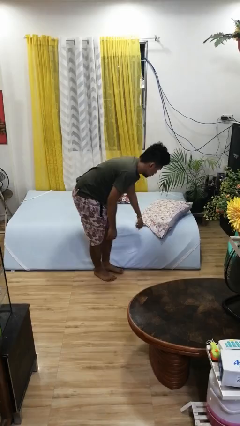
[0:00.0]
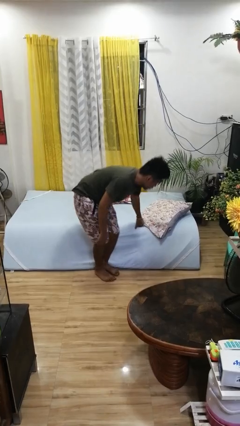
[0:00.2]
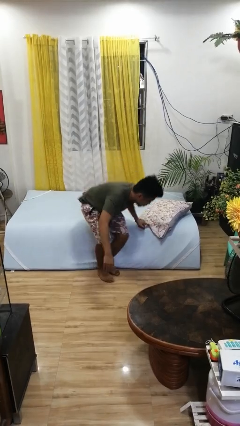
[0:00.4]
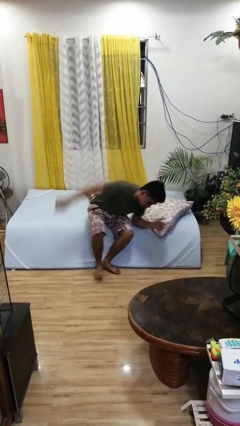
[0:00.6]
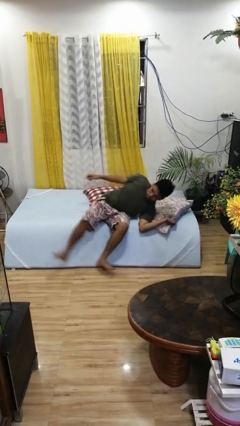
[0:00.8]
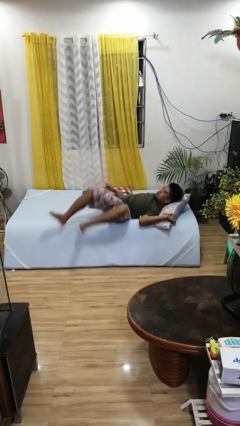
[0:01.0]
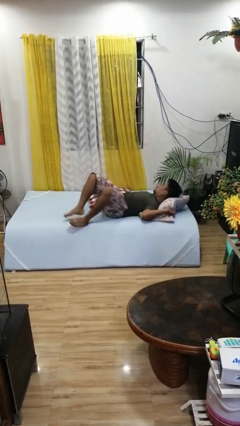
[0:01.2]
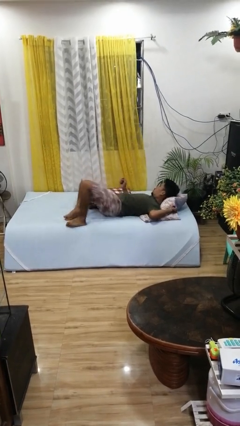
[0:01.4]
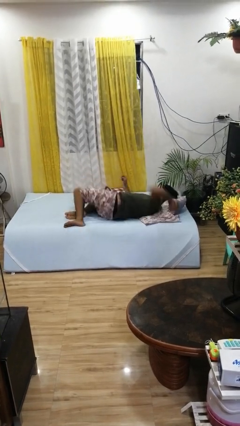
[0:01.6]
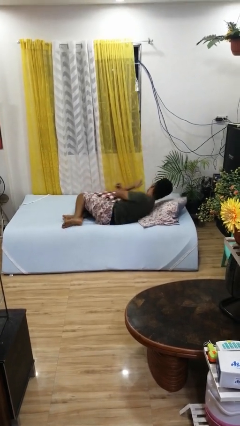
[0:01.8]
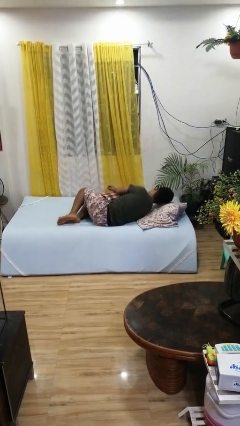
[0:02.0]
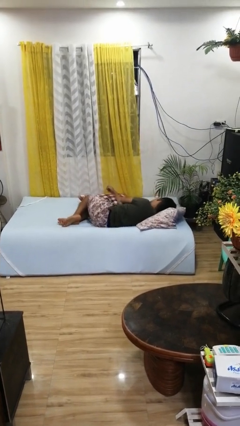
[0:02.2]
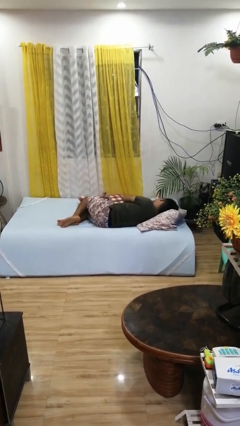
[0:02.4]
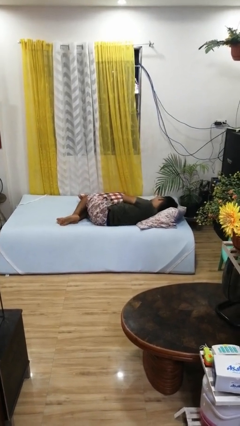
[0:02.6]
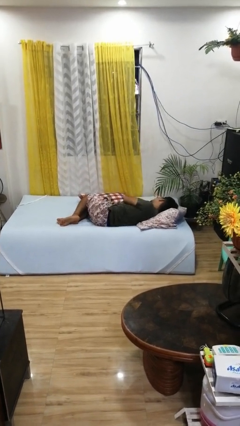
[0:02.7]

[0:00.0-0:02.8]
person lies down on bed

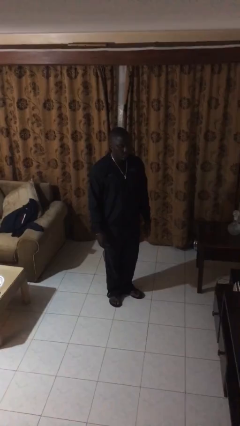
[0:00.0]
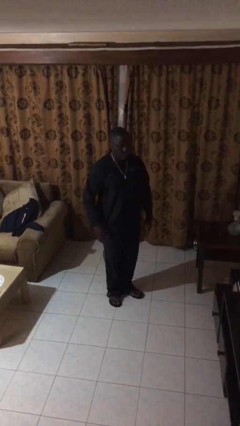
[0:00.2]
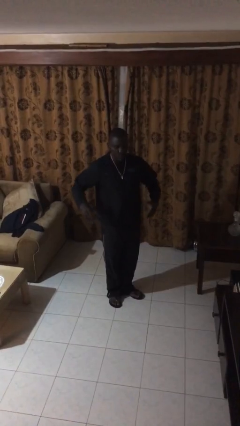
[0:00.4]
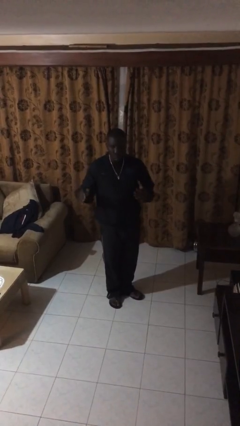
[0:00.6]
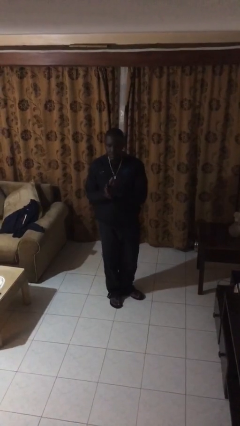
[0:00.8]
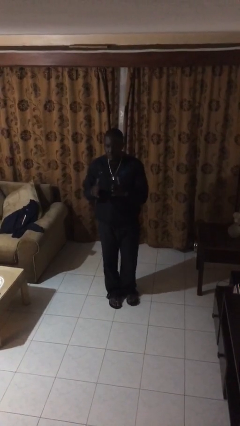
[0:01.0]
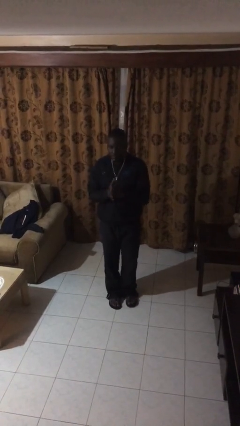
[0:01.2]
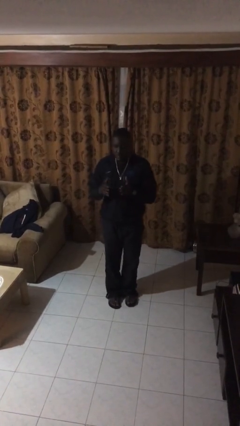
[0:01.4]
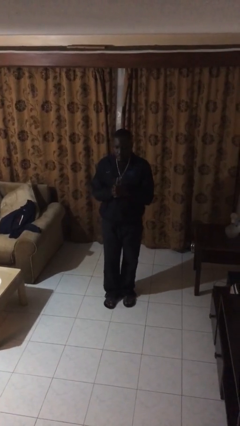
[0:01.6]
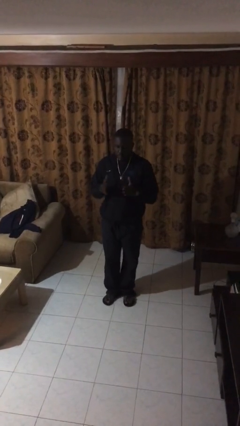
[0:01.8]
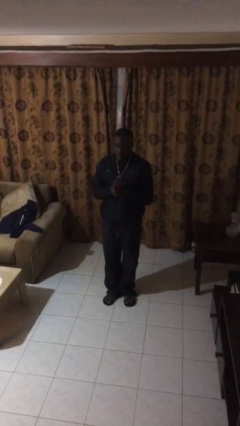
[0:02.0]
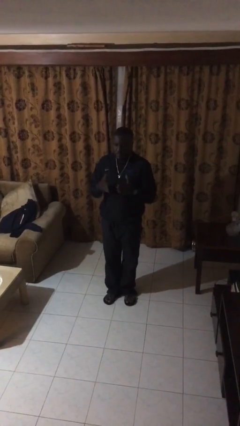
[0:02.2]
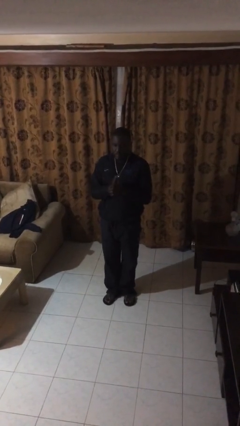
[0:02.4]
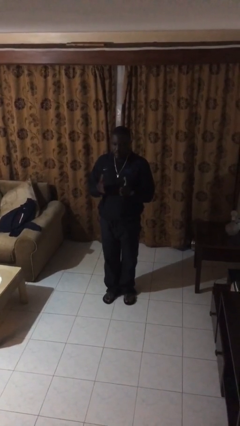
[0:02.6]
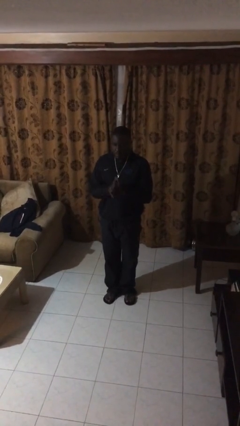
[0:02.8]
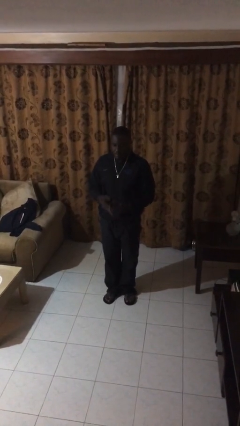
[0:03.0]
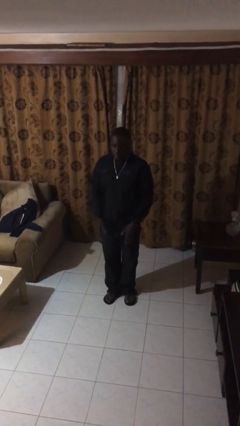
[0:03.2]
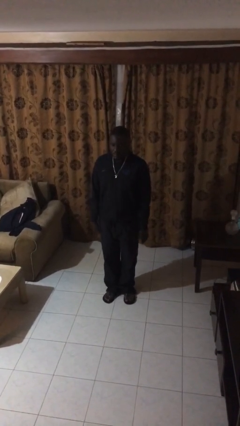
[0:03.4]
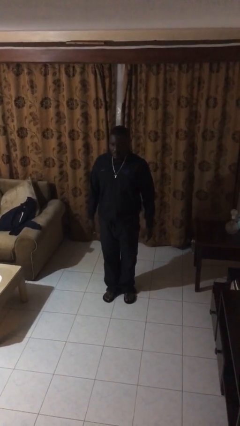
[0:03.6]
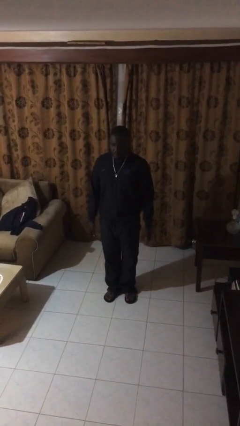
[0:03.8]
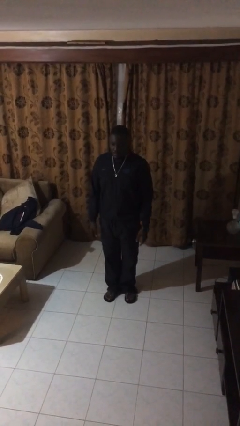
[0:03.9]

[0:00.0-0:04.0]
person claps hands

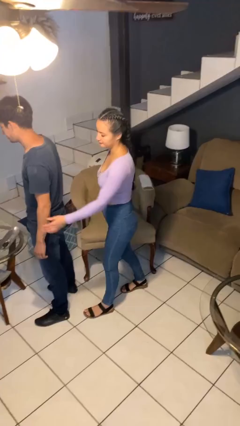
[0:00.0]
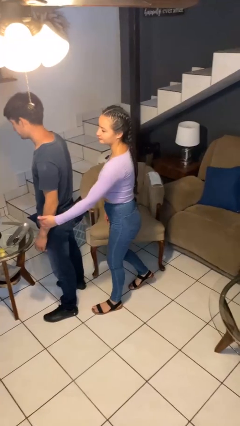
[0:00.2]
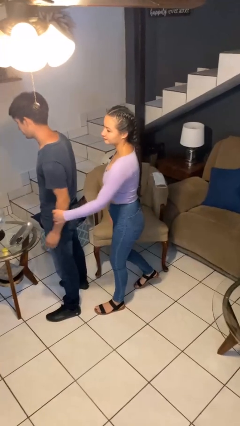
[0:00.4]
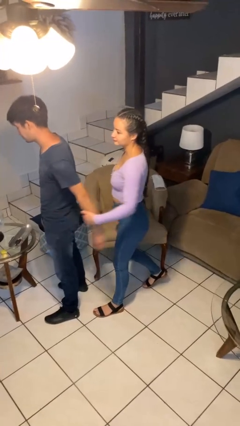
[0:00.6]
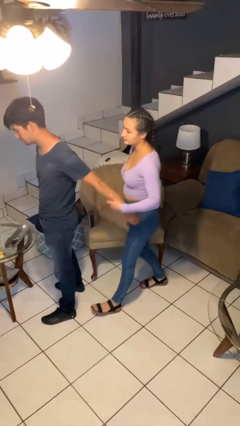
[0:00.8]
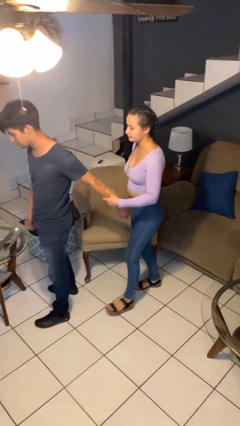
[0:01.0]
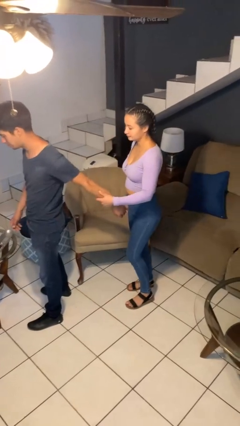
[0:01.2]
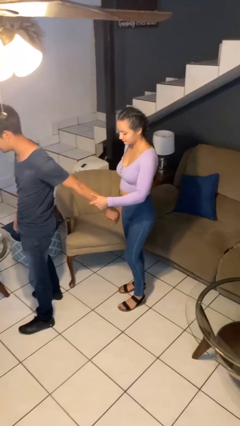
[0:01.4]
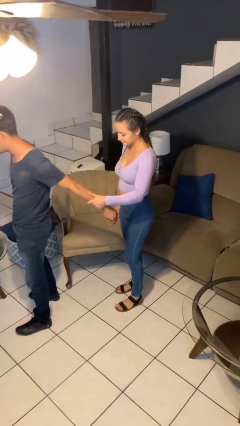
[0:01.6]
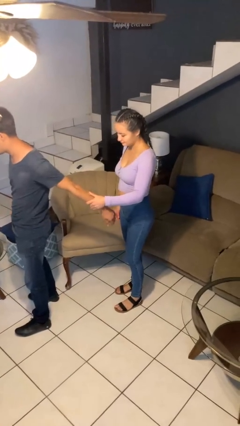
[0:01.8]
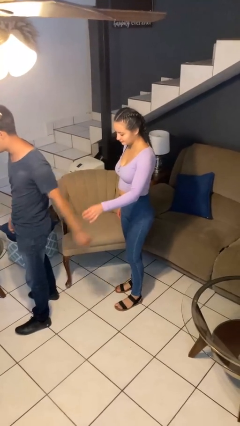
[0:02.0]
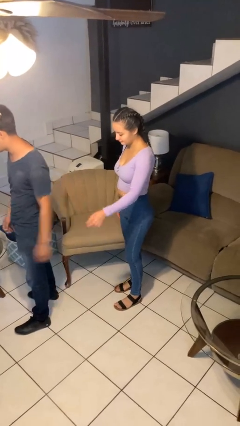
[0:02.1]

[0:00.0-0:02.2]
person grabs person by forearm

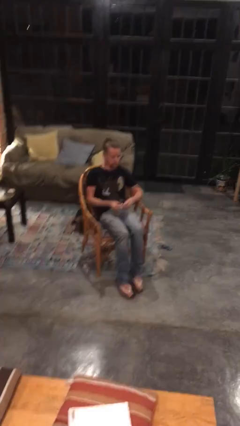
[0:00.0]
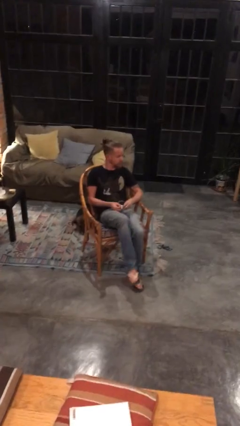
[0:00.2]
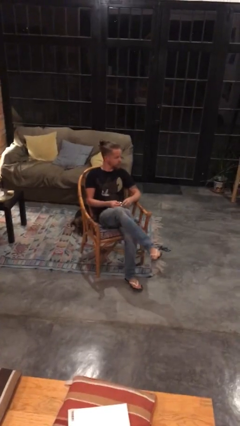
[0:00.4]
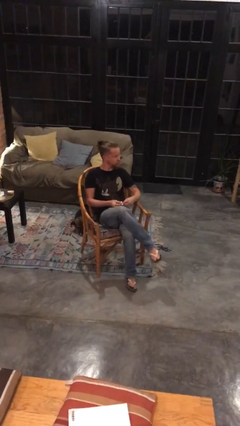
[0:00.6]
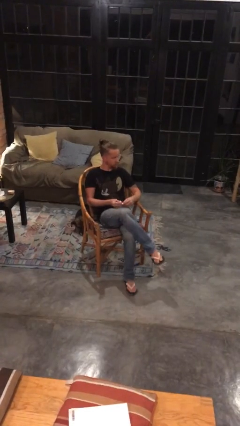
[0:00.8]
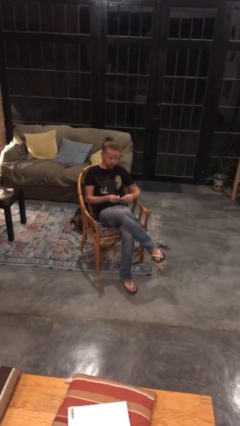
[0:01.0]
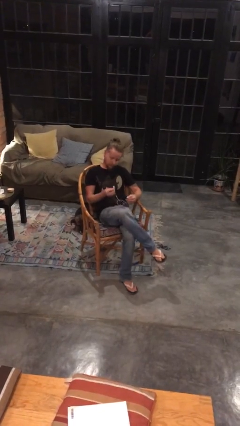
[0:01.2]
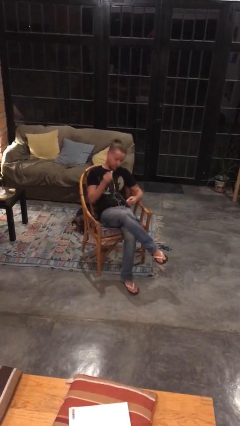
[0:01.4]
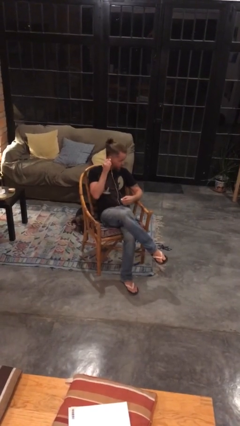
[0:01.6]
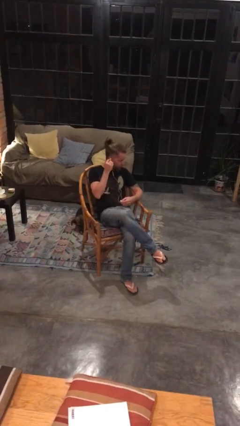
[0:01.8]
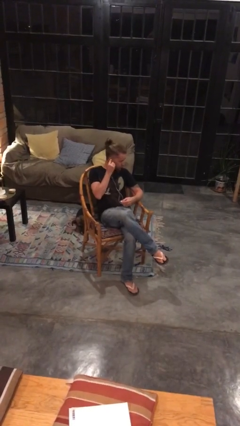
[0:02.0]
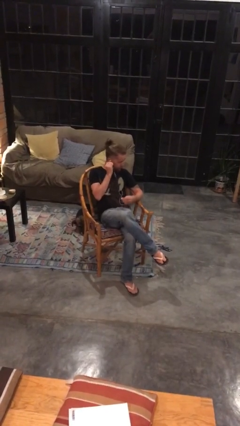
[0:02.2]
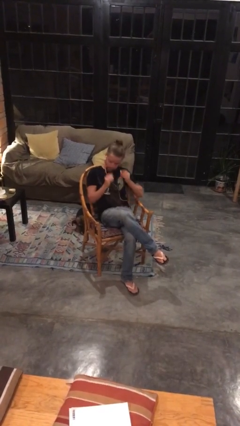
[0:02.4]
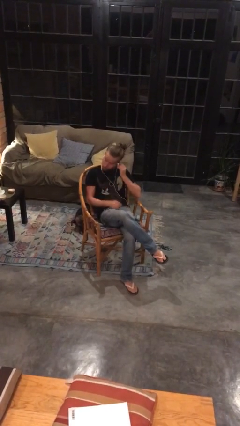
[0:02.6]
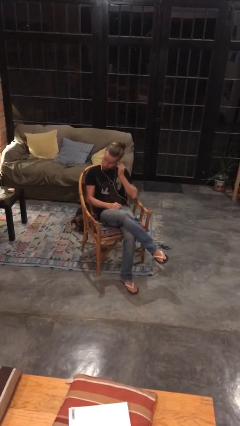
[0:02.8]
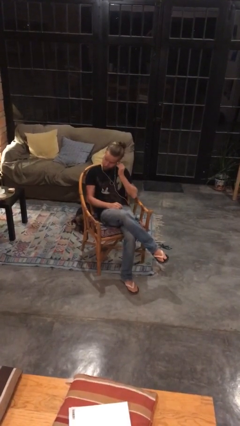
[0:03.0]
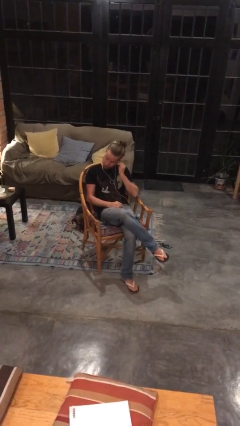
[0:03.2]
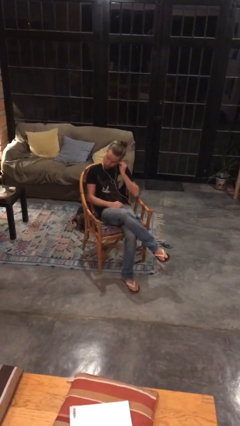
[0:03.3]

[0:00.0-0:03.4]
person puts on headphones

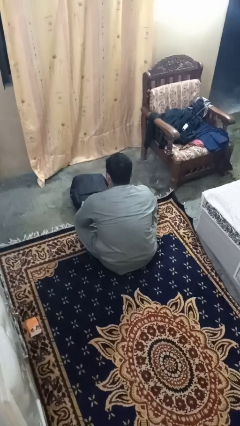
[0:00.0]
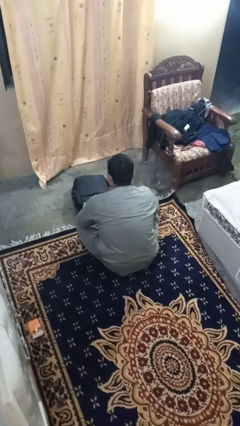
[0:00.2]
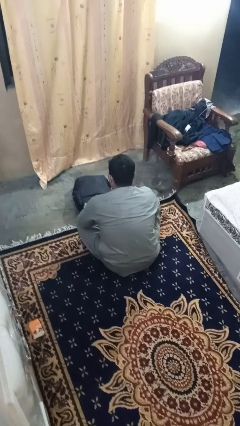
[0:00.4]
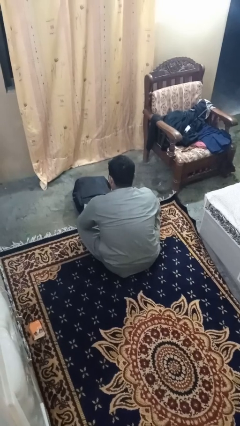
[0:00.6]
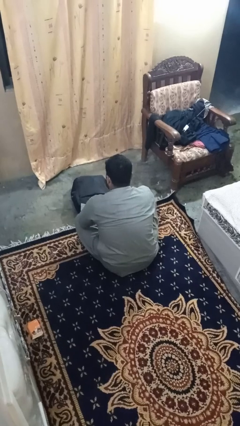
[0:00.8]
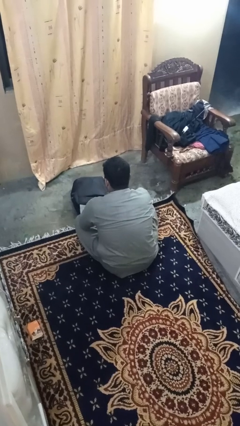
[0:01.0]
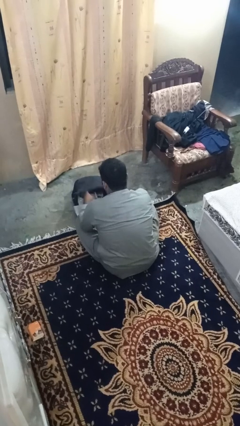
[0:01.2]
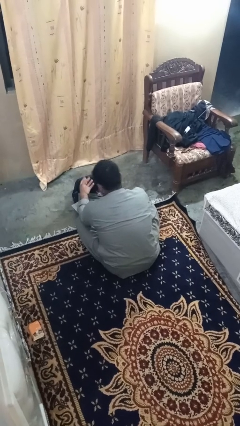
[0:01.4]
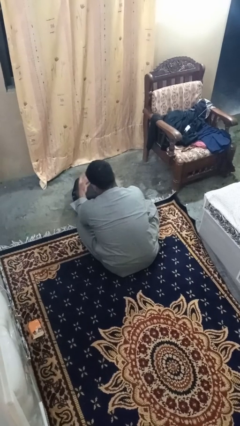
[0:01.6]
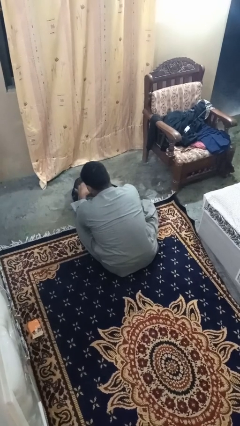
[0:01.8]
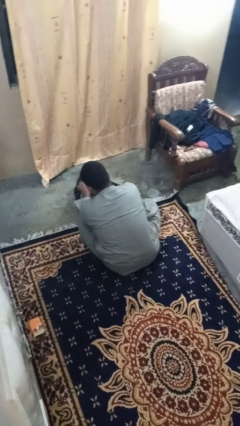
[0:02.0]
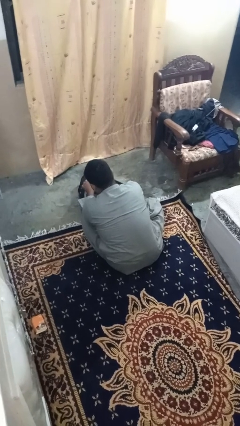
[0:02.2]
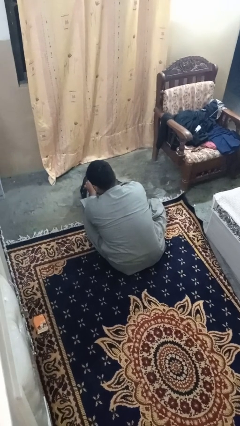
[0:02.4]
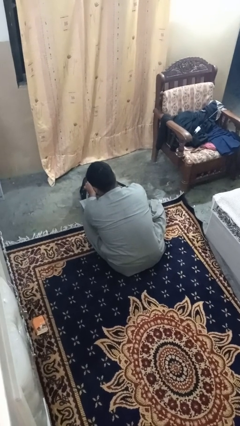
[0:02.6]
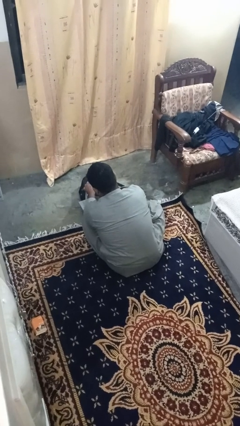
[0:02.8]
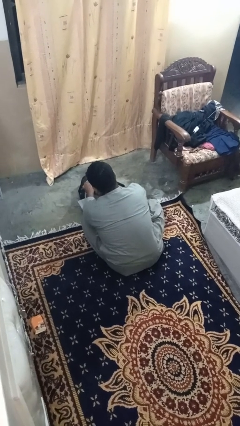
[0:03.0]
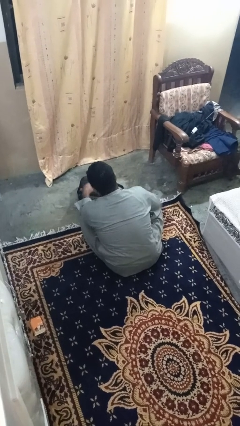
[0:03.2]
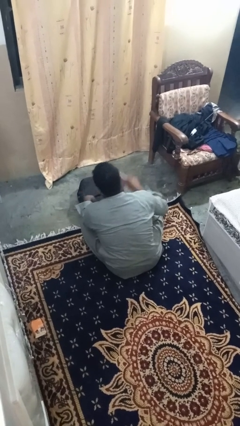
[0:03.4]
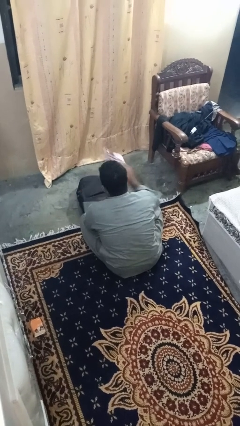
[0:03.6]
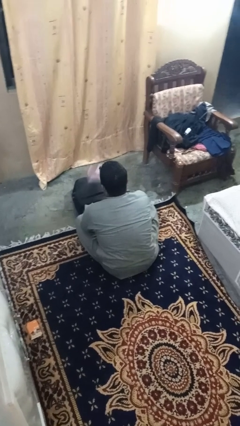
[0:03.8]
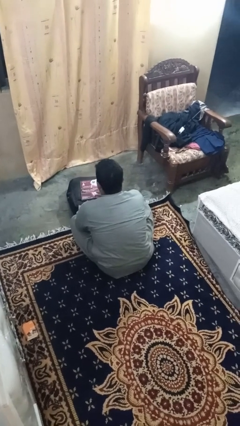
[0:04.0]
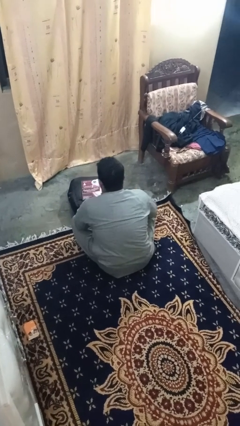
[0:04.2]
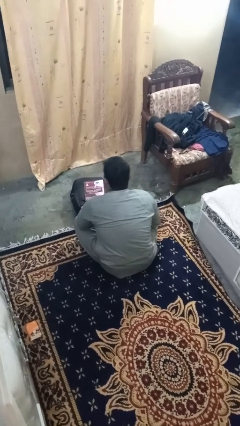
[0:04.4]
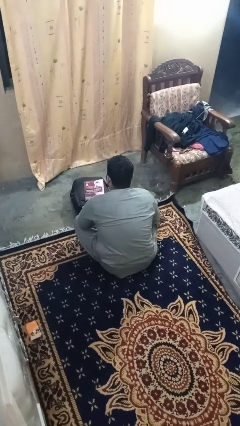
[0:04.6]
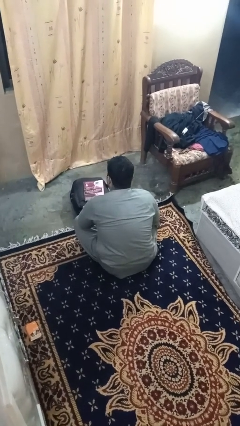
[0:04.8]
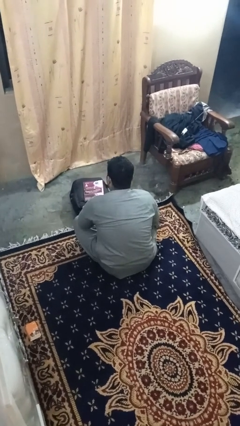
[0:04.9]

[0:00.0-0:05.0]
person takes object from bag

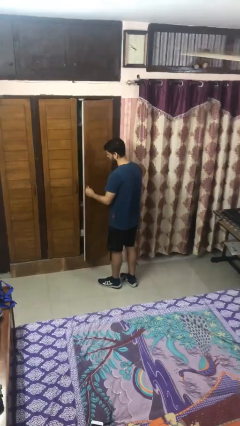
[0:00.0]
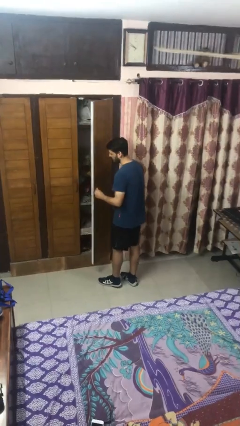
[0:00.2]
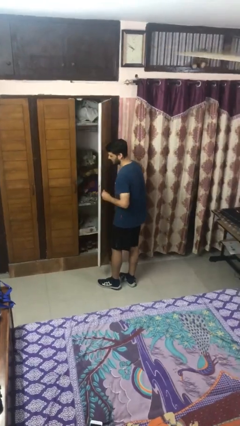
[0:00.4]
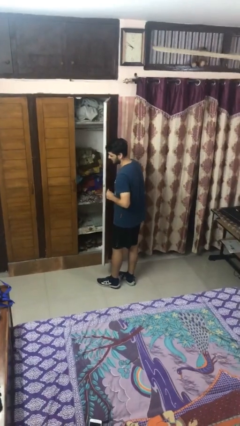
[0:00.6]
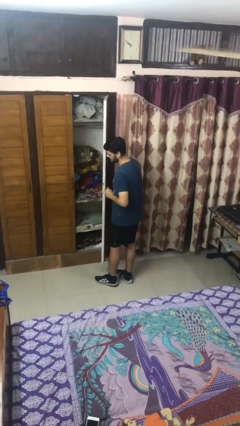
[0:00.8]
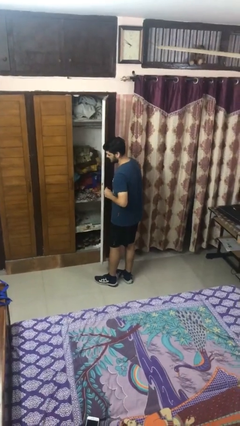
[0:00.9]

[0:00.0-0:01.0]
person opens facility door
